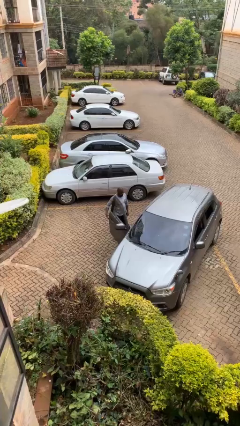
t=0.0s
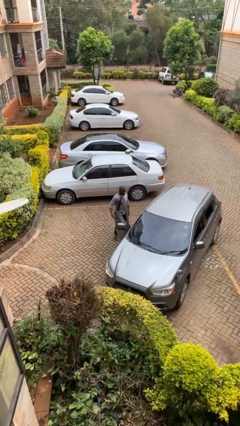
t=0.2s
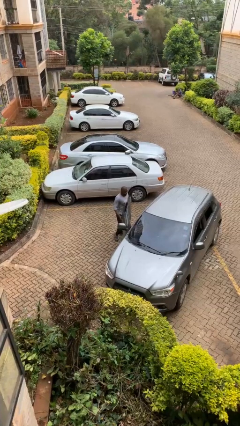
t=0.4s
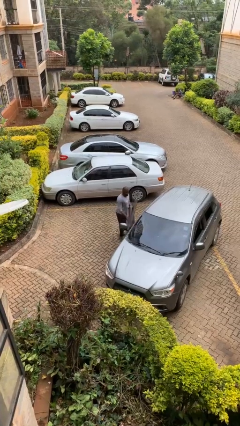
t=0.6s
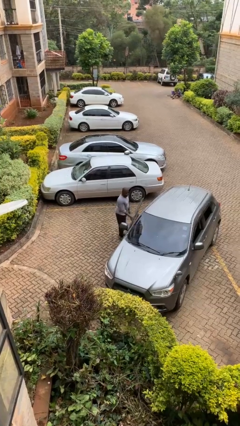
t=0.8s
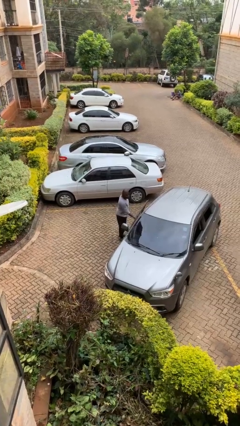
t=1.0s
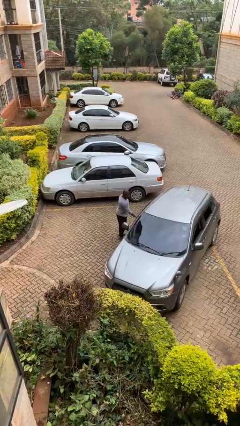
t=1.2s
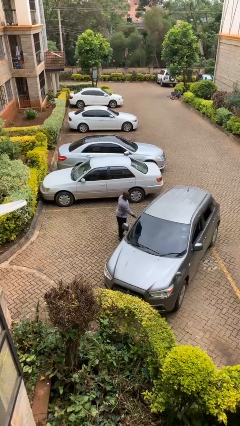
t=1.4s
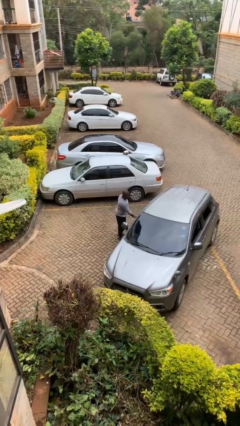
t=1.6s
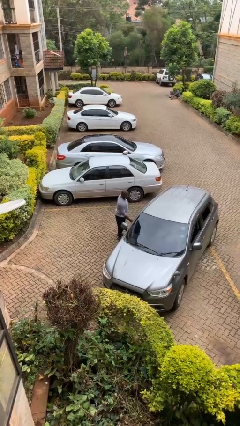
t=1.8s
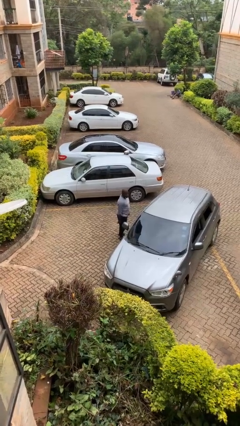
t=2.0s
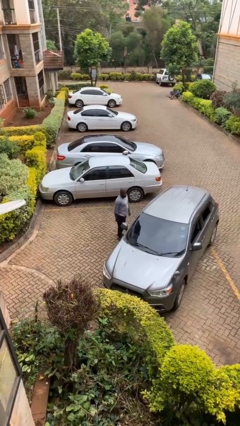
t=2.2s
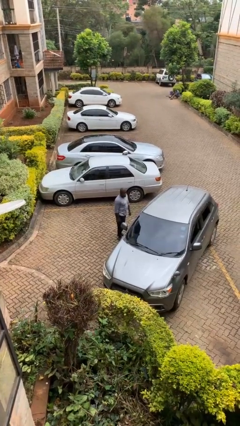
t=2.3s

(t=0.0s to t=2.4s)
person closes car door

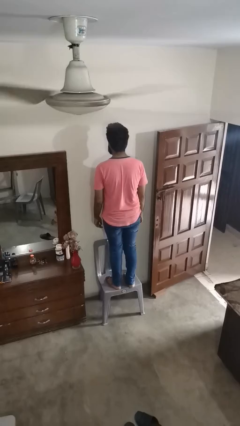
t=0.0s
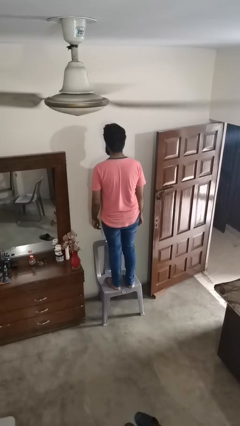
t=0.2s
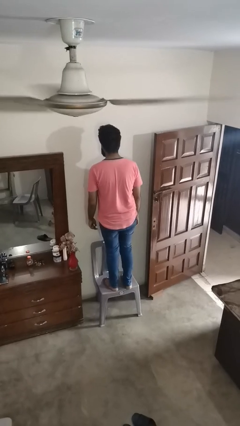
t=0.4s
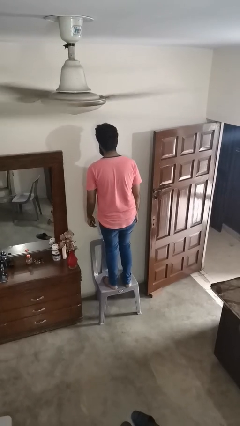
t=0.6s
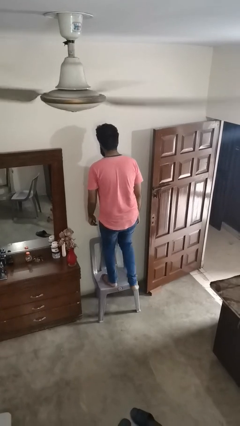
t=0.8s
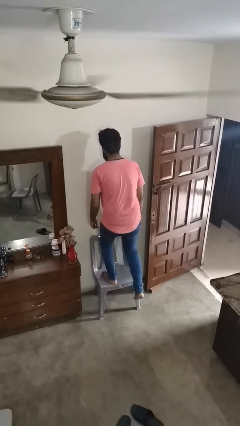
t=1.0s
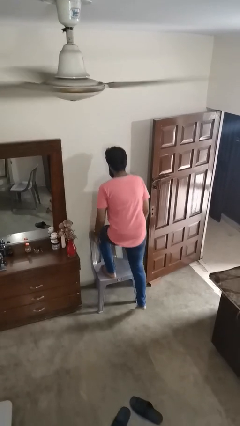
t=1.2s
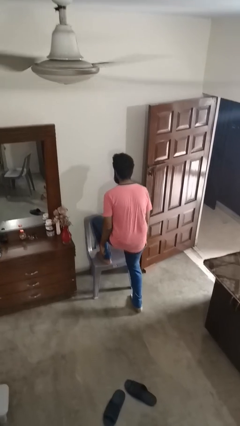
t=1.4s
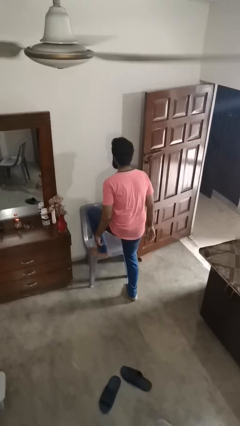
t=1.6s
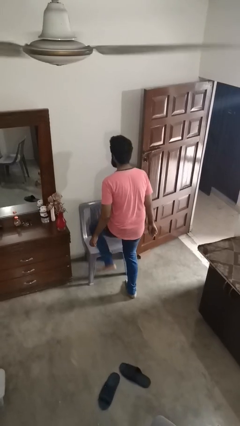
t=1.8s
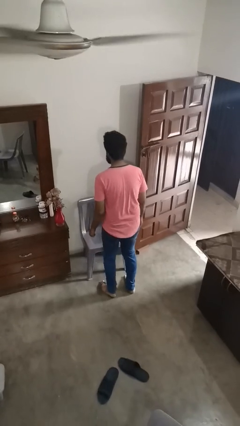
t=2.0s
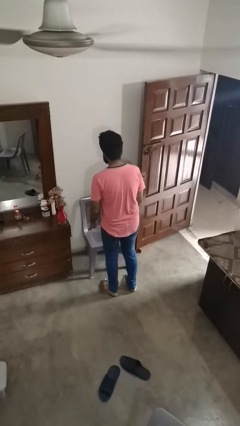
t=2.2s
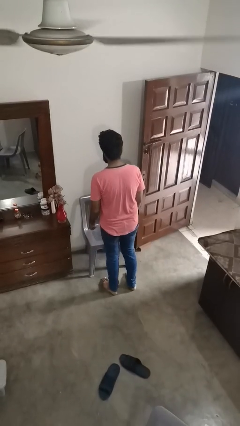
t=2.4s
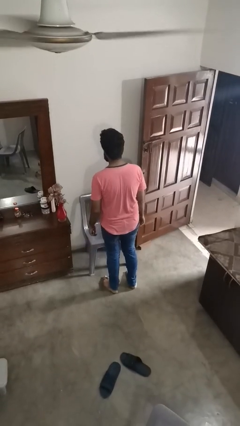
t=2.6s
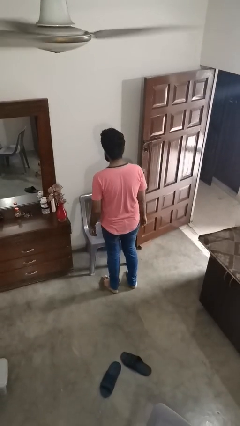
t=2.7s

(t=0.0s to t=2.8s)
person climbs off chair

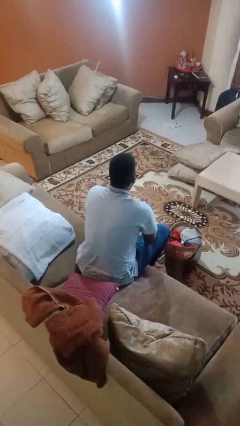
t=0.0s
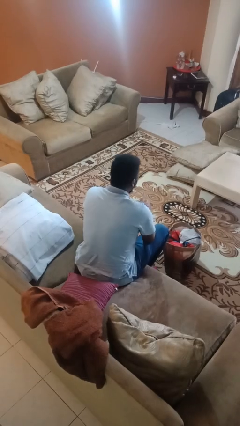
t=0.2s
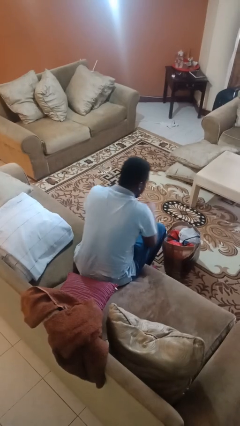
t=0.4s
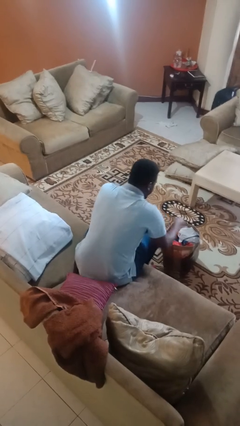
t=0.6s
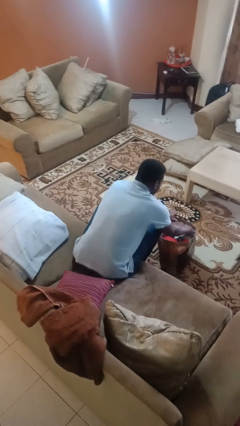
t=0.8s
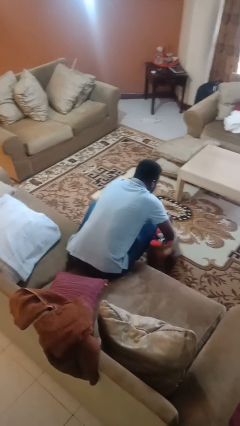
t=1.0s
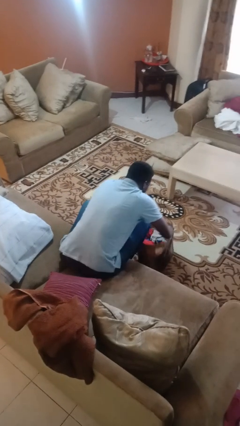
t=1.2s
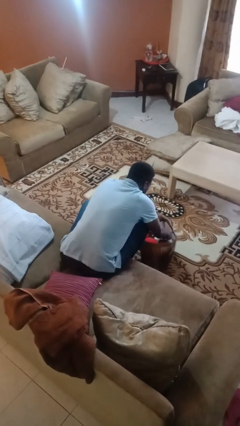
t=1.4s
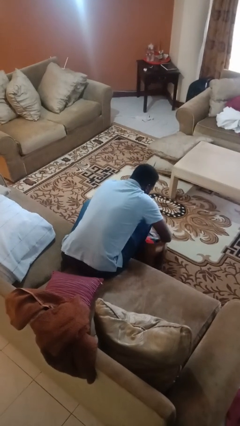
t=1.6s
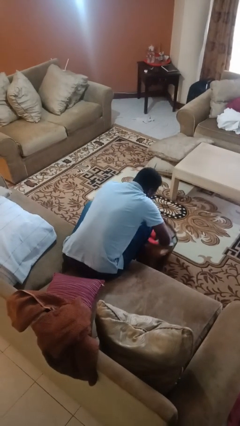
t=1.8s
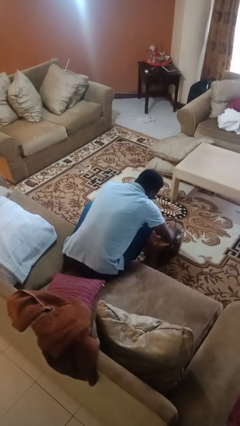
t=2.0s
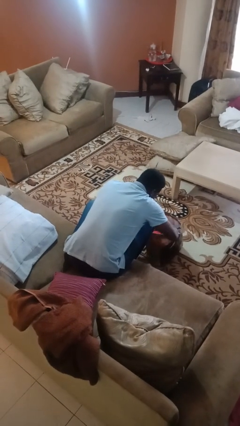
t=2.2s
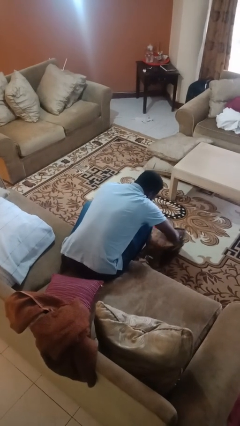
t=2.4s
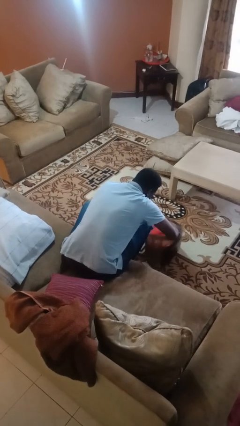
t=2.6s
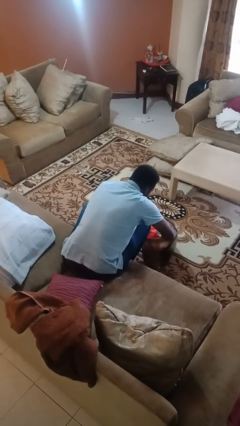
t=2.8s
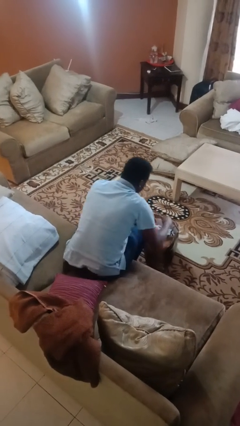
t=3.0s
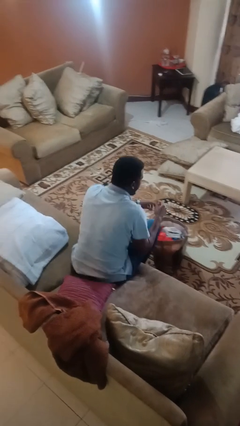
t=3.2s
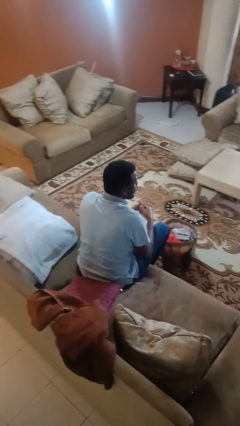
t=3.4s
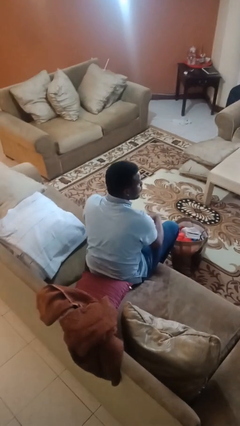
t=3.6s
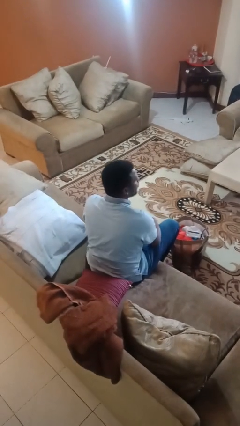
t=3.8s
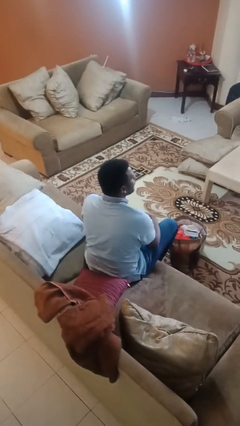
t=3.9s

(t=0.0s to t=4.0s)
person searches in bag

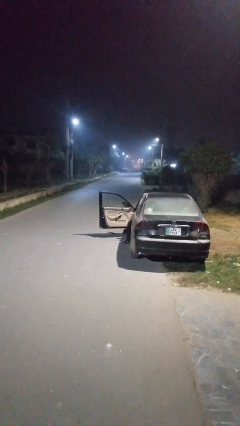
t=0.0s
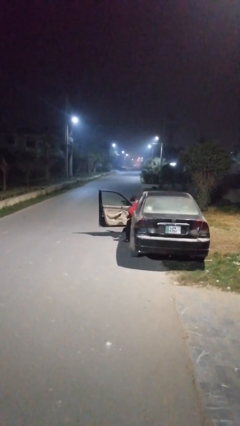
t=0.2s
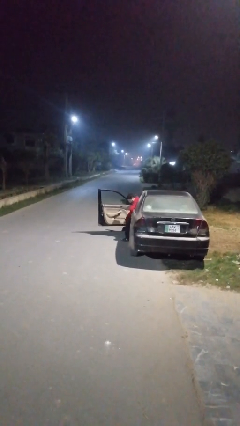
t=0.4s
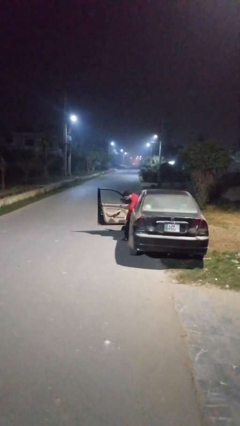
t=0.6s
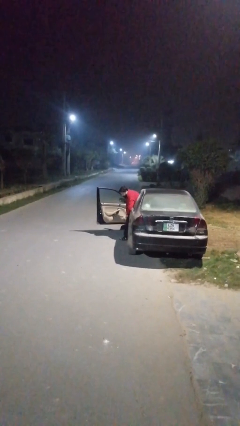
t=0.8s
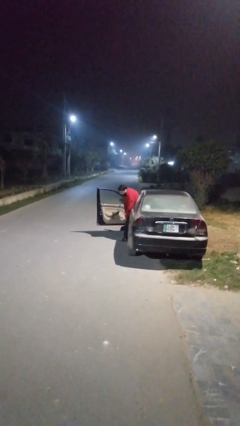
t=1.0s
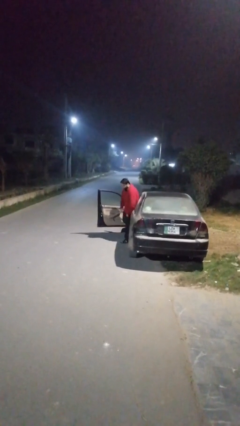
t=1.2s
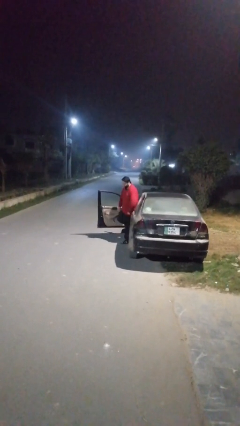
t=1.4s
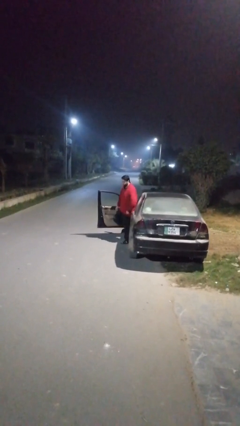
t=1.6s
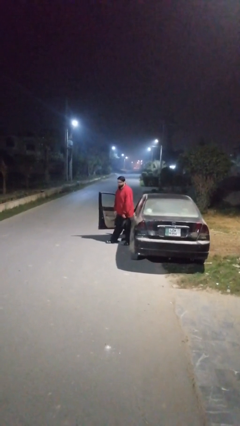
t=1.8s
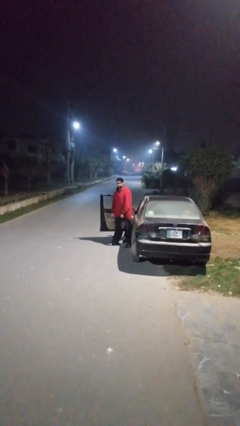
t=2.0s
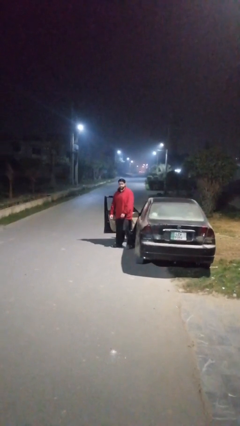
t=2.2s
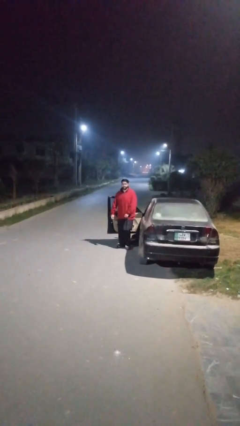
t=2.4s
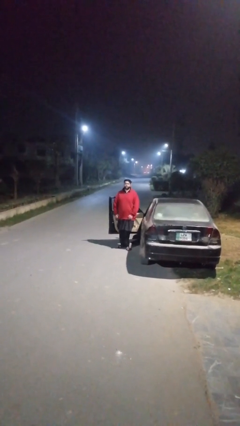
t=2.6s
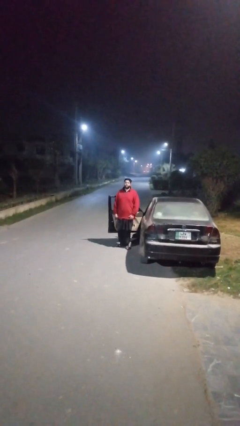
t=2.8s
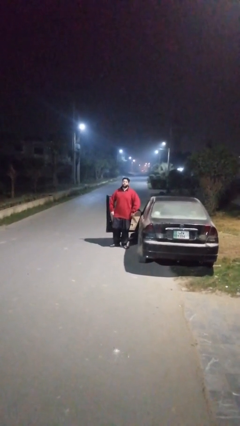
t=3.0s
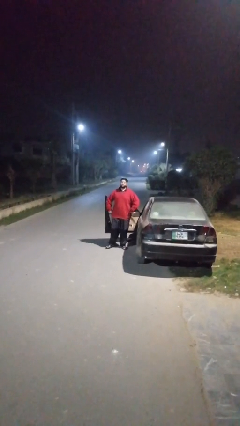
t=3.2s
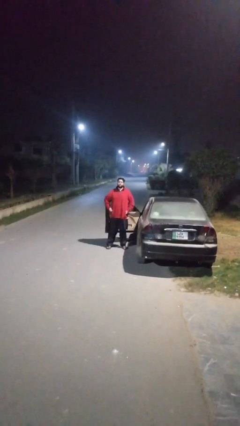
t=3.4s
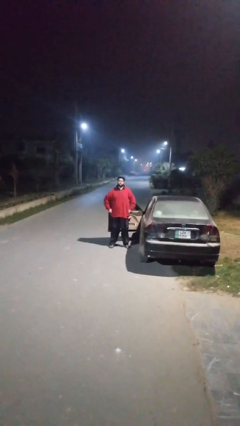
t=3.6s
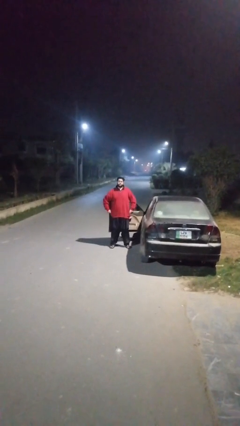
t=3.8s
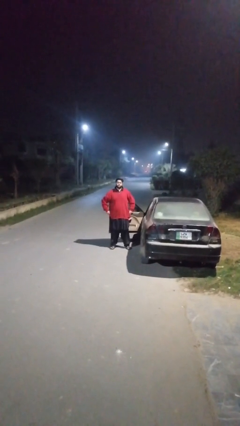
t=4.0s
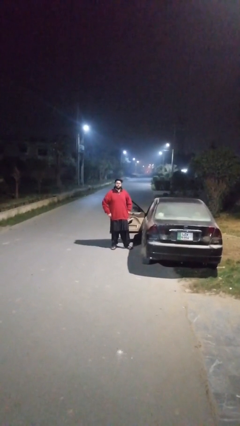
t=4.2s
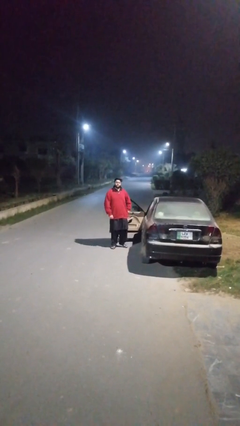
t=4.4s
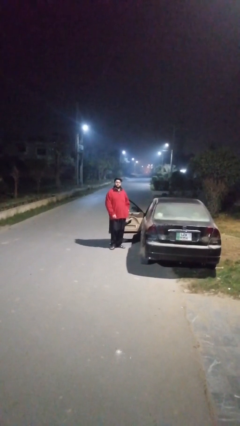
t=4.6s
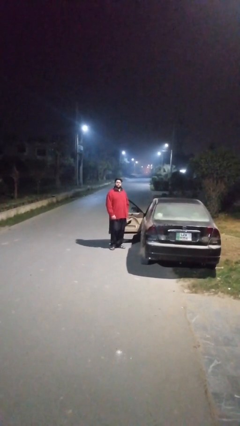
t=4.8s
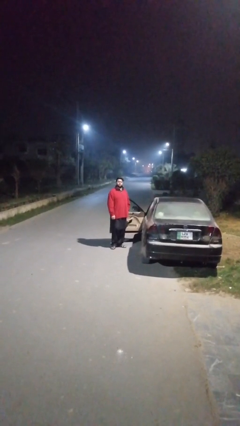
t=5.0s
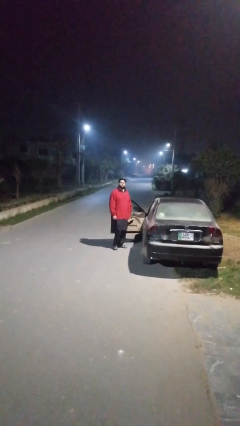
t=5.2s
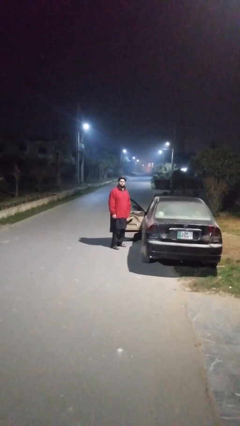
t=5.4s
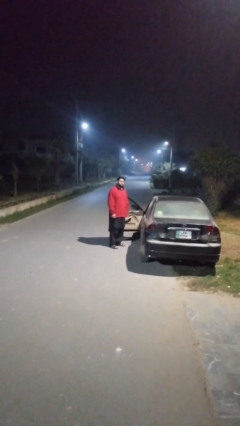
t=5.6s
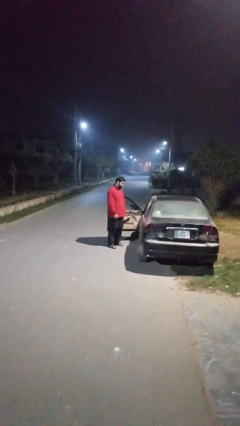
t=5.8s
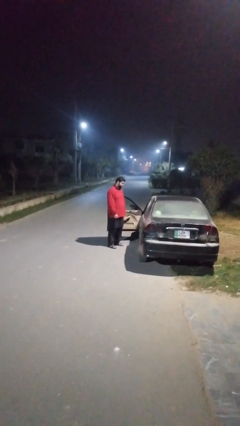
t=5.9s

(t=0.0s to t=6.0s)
person exits car

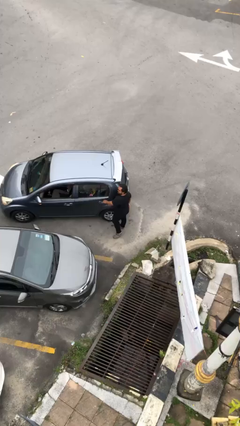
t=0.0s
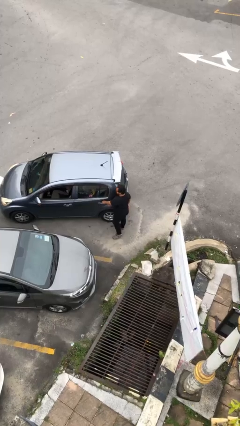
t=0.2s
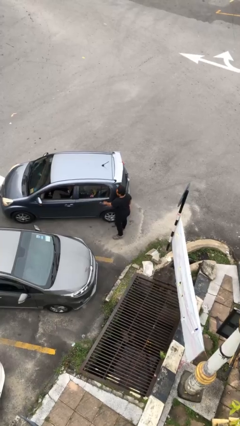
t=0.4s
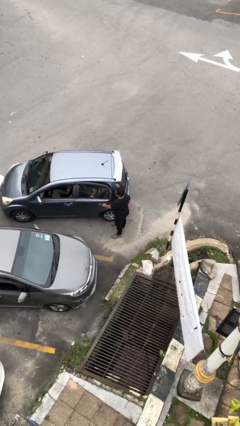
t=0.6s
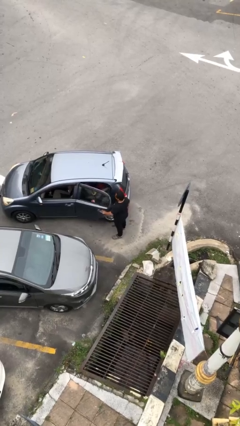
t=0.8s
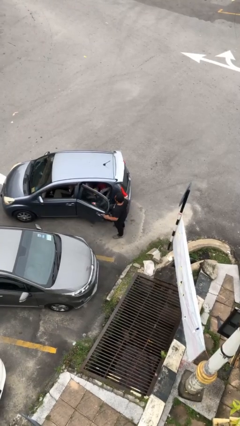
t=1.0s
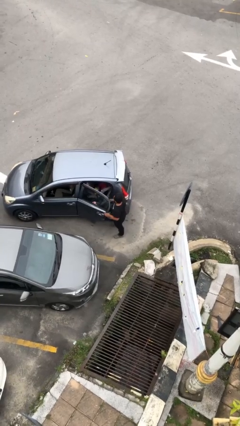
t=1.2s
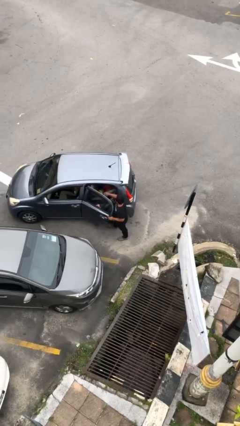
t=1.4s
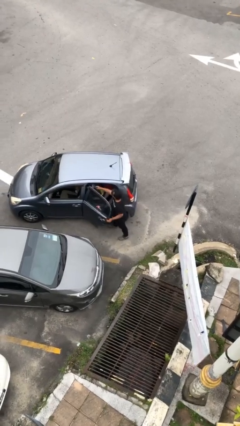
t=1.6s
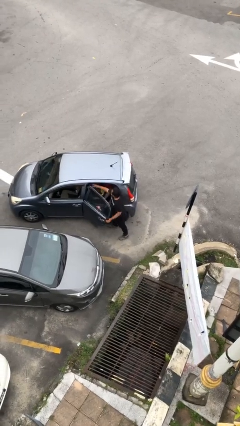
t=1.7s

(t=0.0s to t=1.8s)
person opens car door

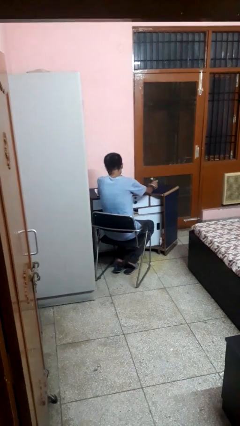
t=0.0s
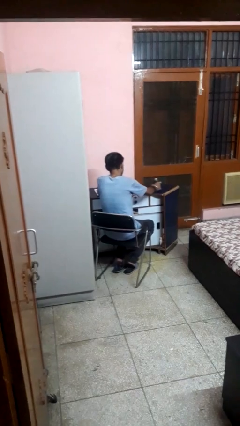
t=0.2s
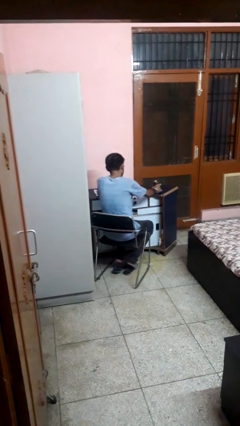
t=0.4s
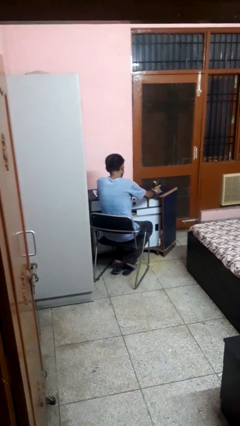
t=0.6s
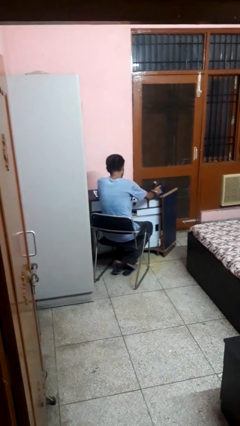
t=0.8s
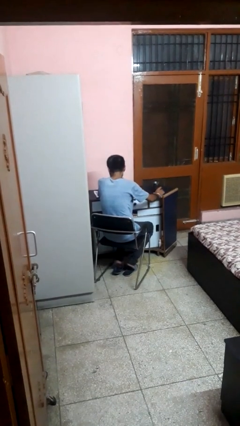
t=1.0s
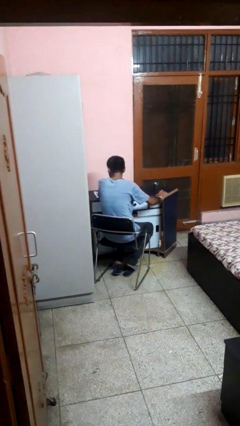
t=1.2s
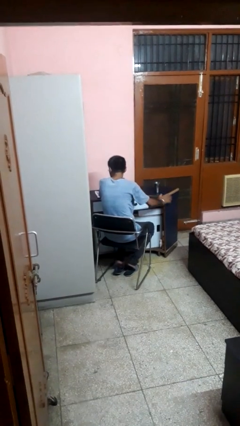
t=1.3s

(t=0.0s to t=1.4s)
person sets upright glass
